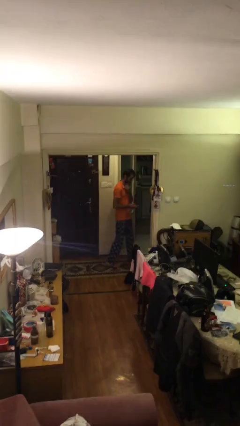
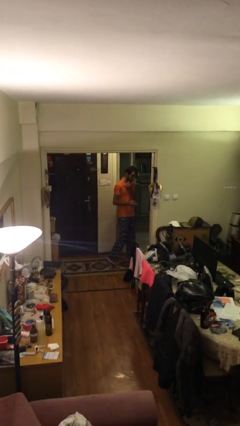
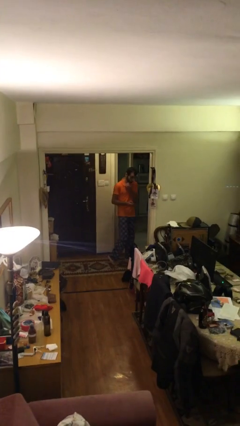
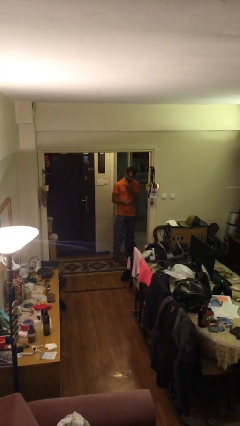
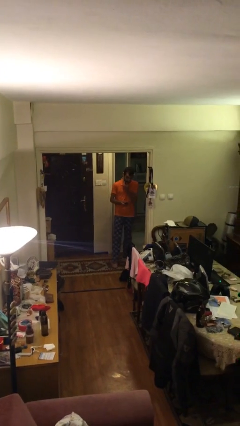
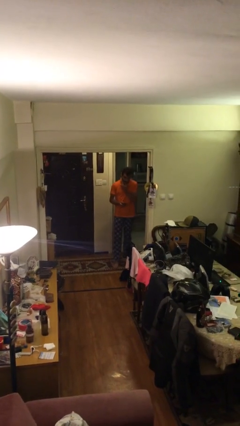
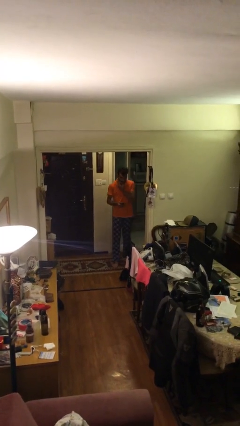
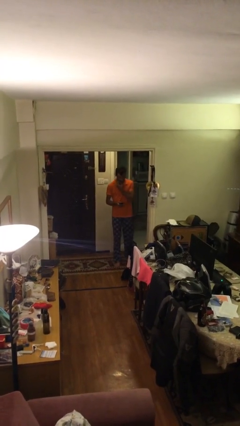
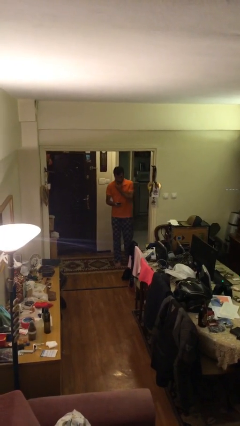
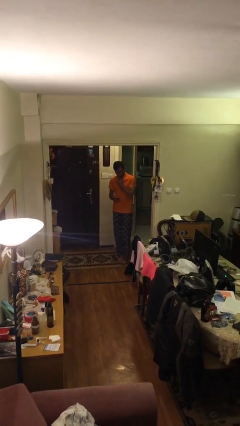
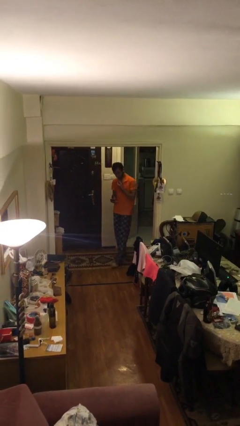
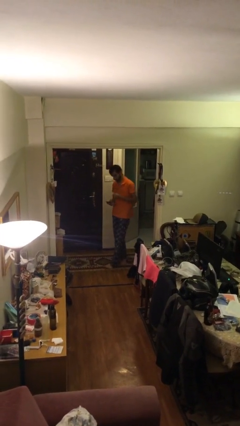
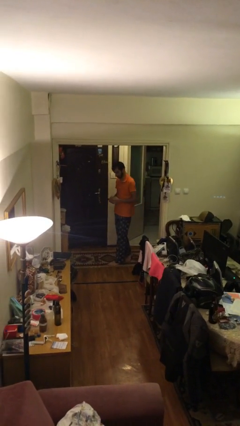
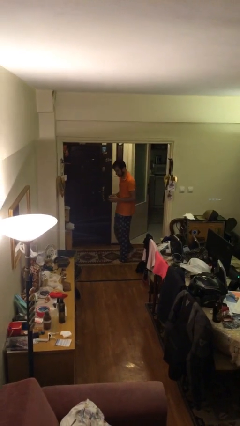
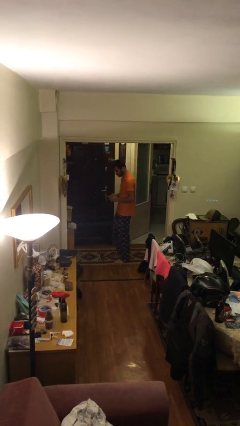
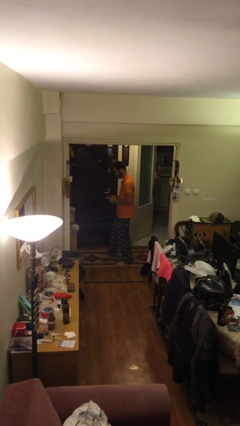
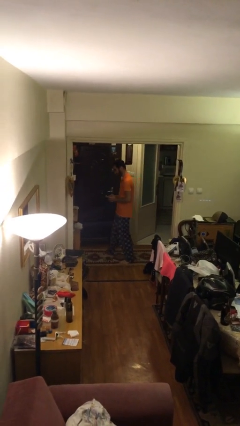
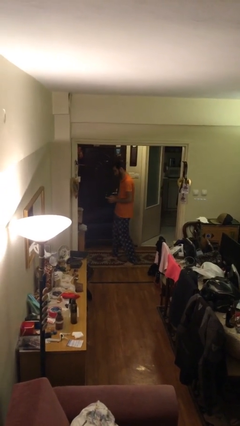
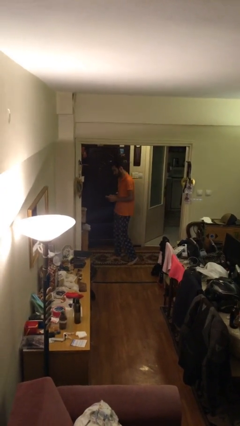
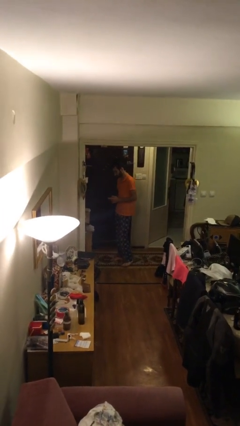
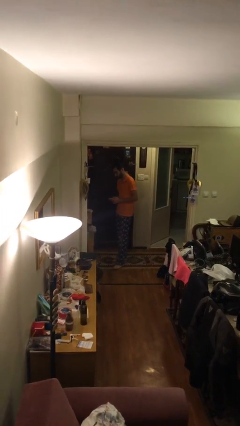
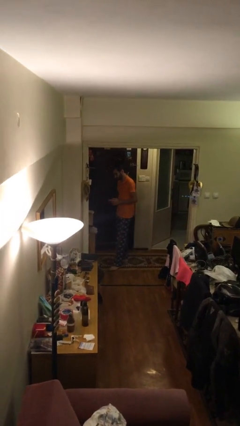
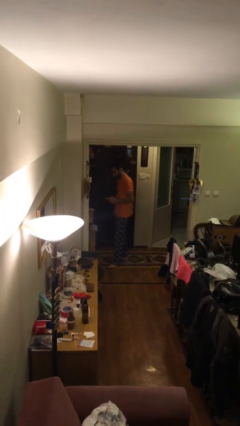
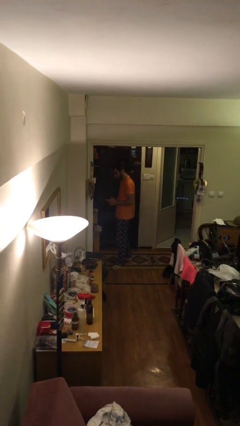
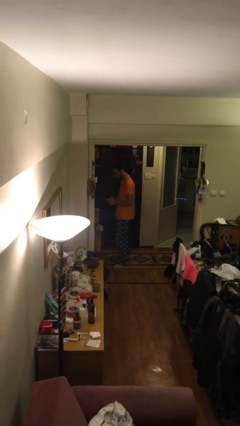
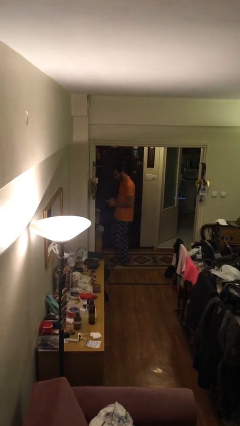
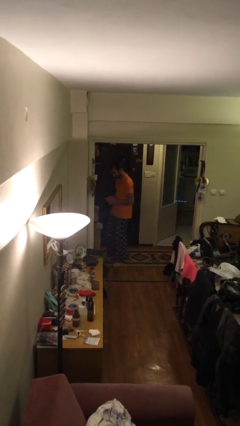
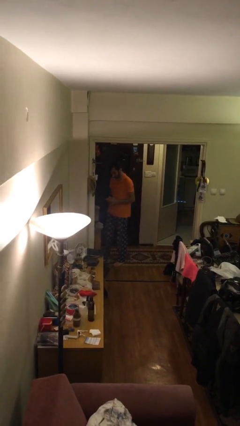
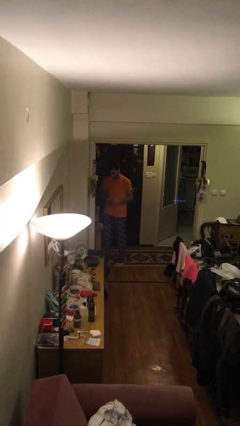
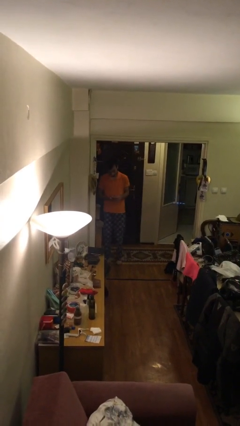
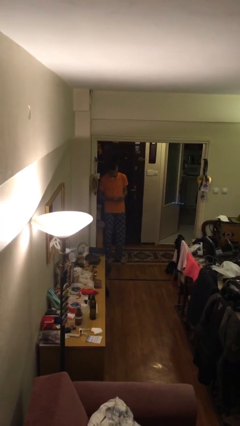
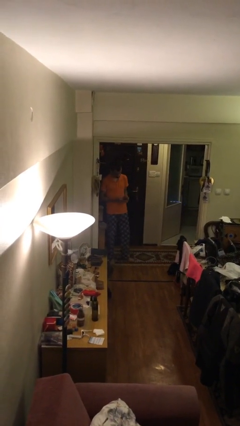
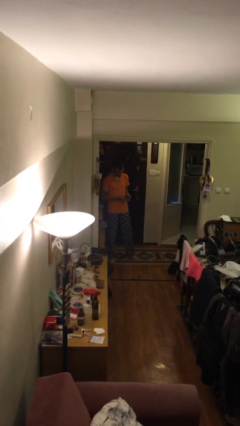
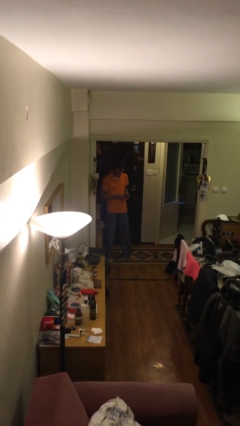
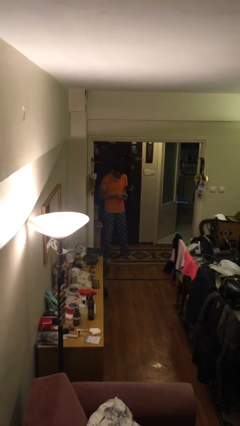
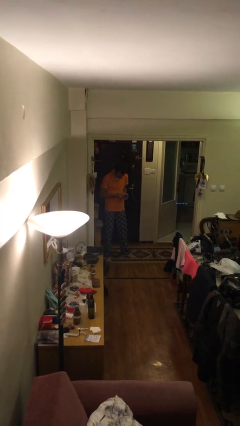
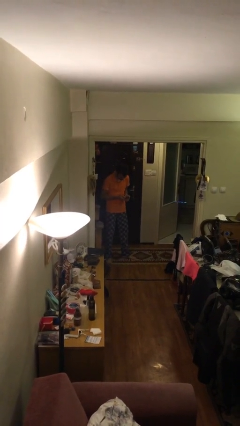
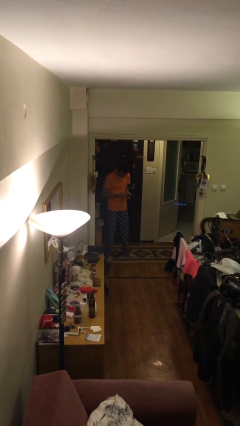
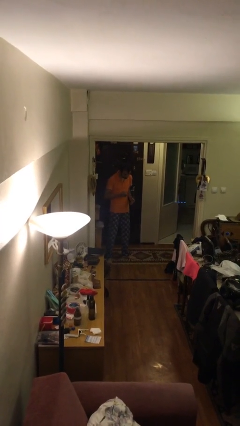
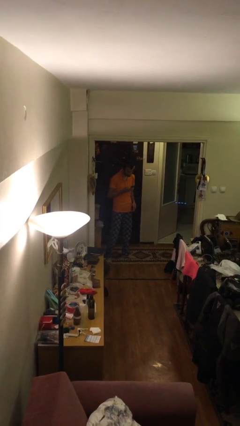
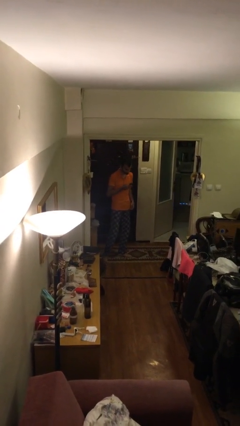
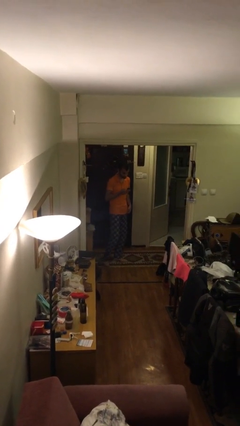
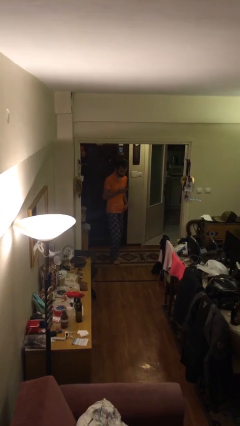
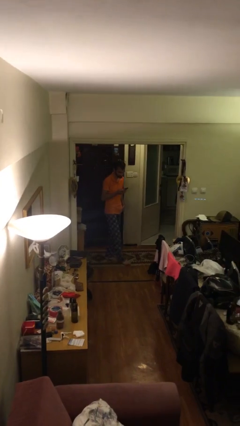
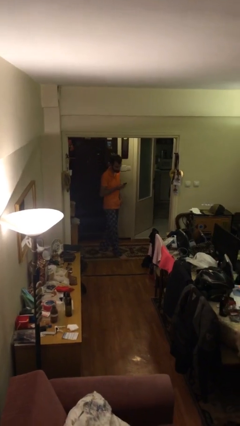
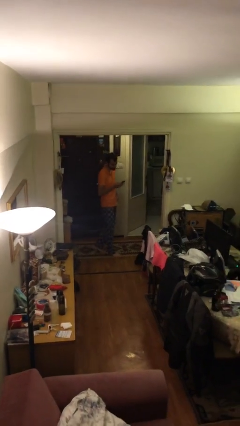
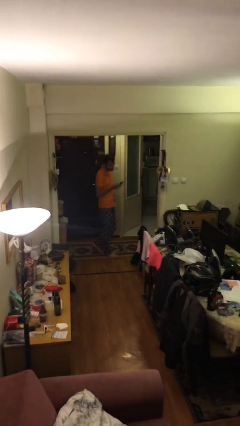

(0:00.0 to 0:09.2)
person texts on phone

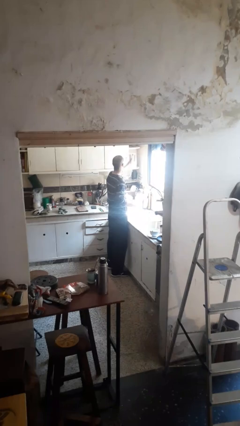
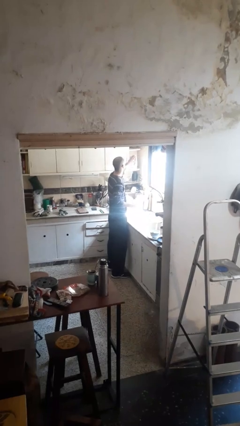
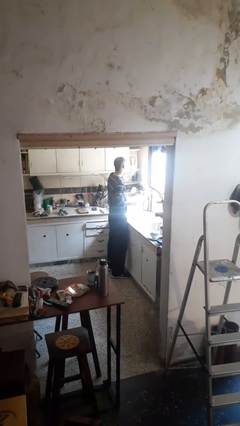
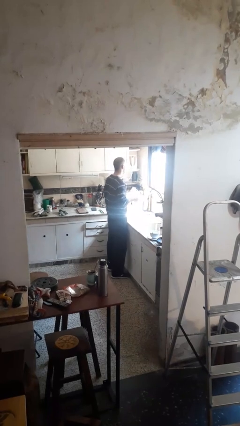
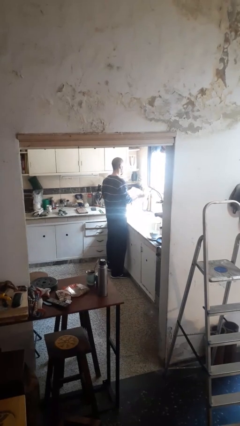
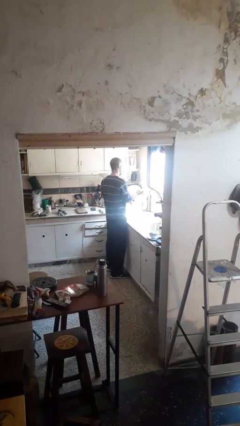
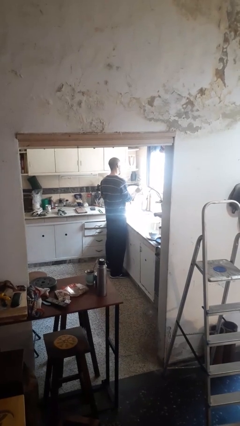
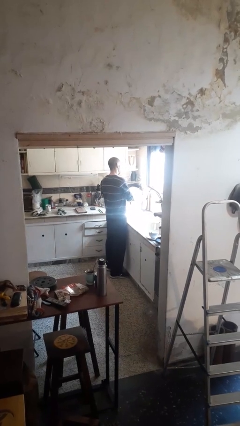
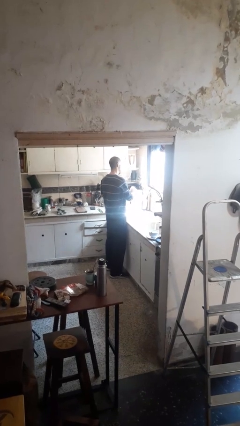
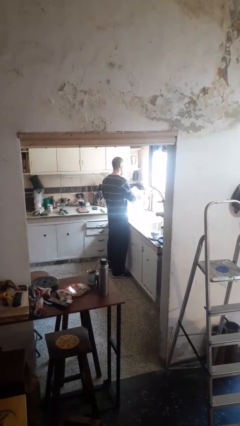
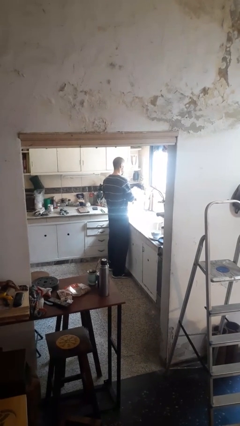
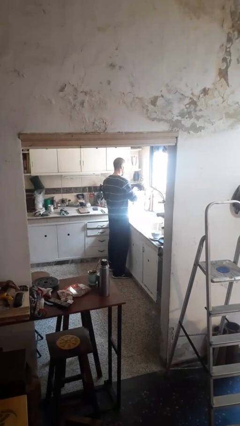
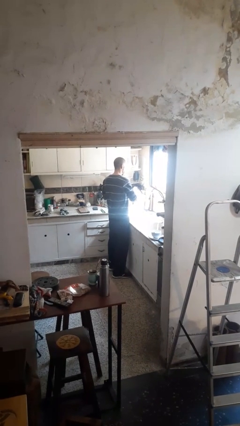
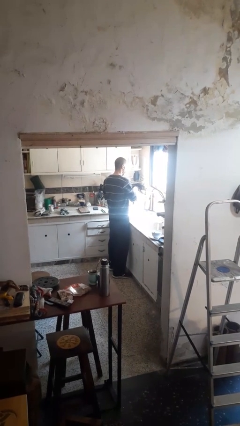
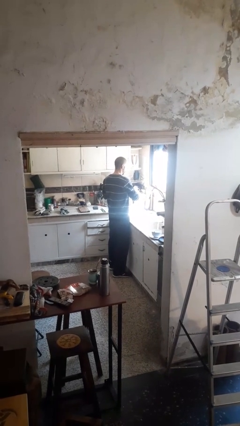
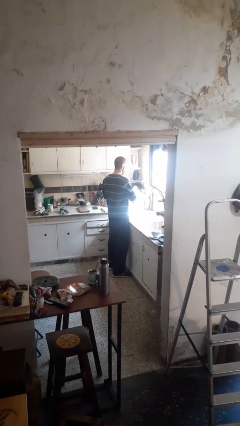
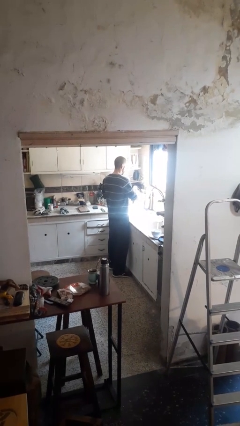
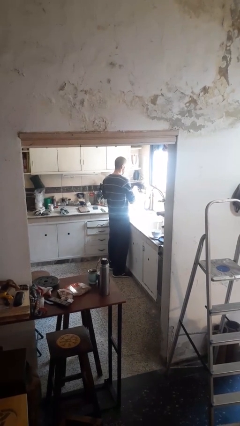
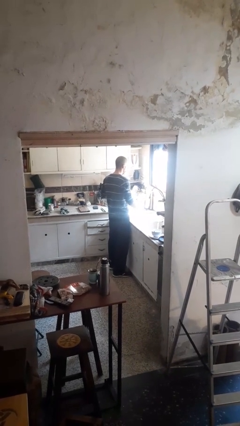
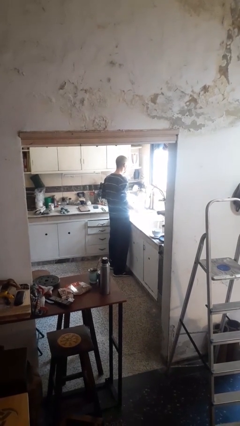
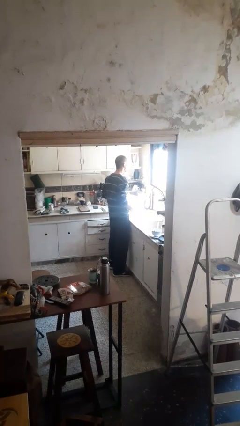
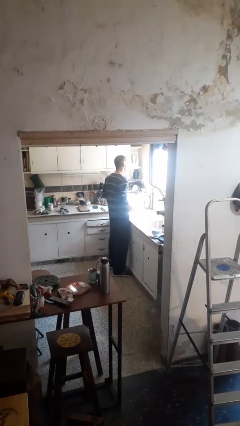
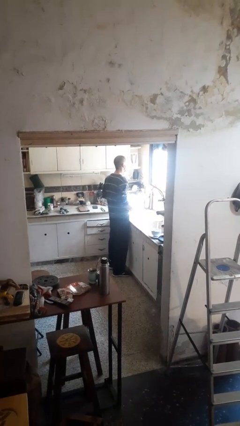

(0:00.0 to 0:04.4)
person washes dish

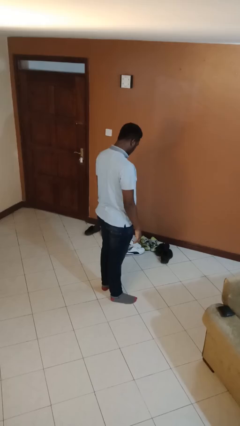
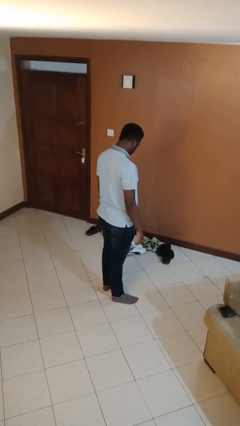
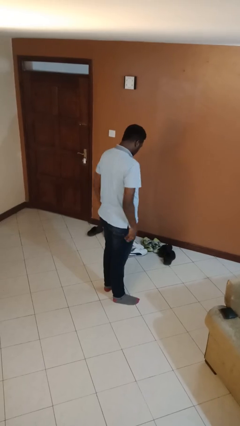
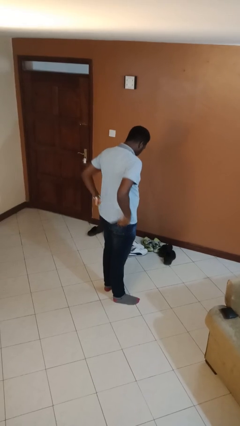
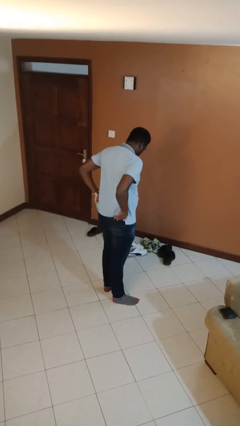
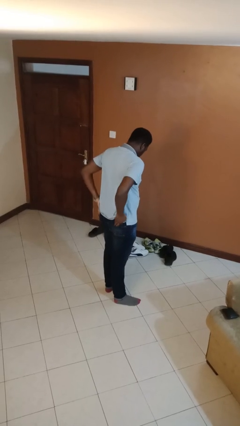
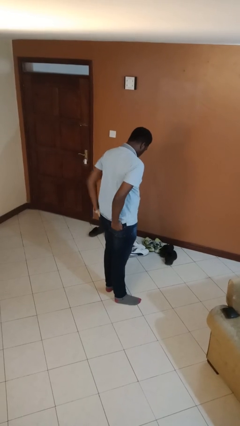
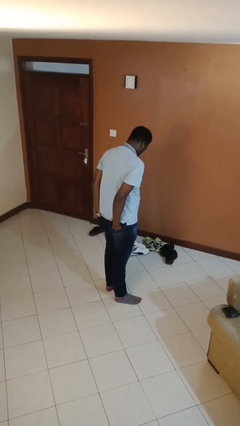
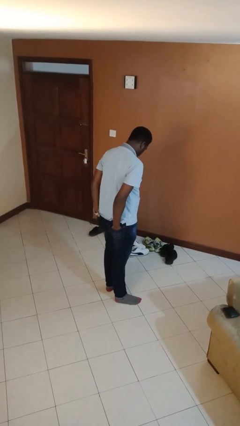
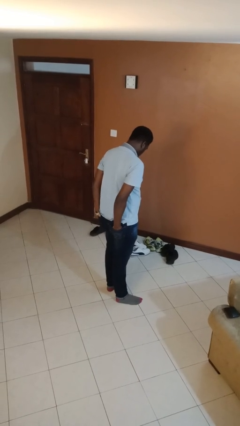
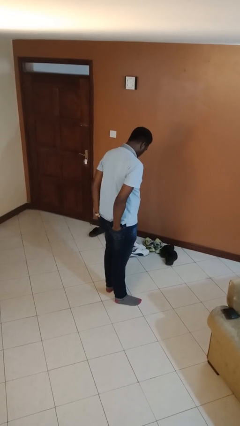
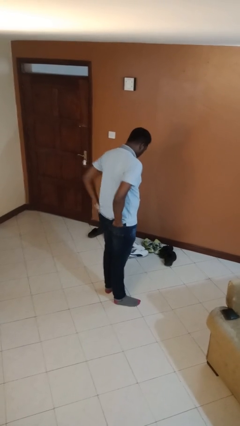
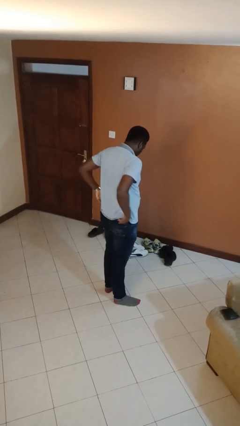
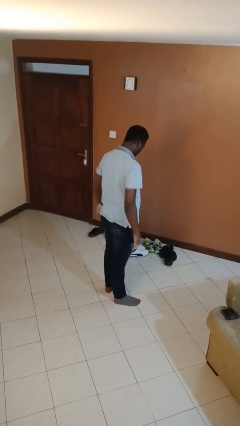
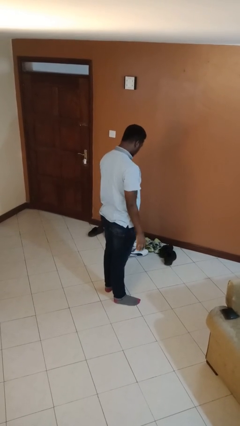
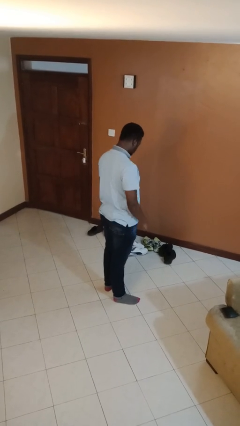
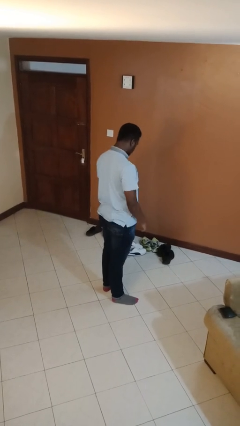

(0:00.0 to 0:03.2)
person puts hands in back pockets

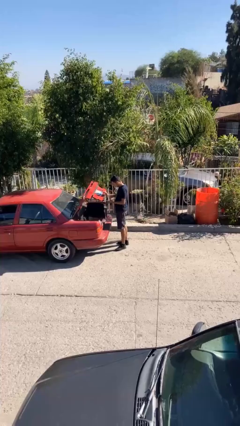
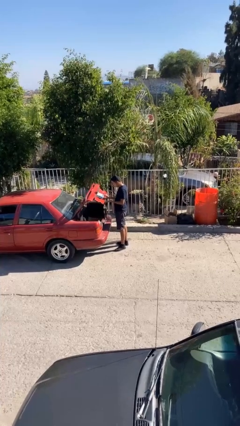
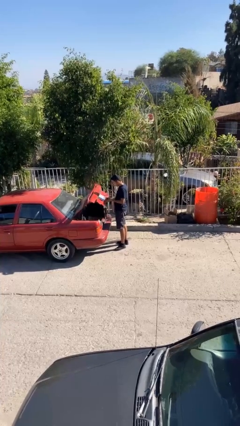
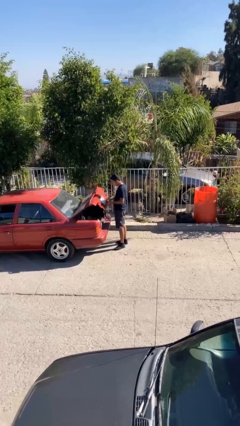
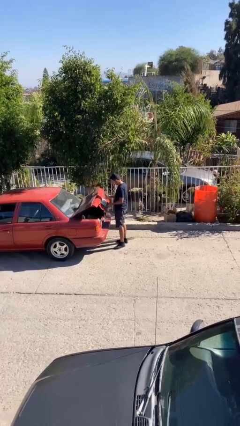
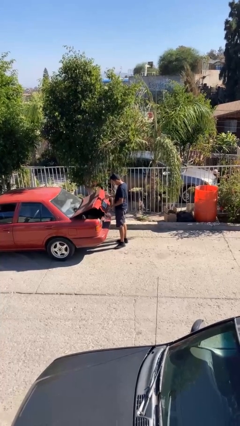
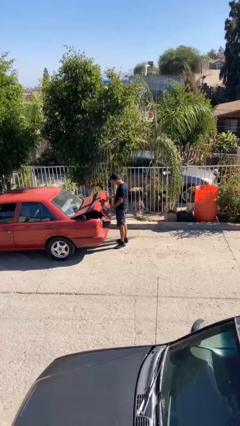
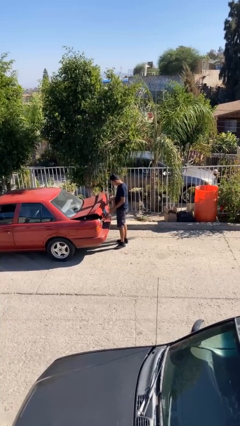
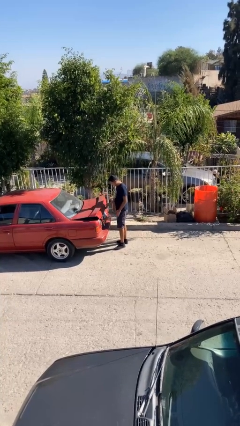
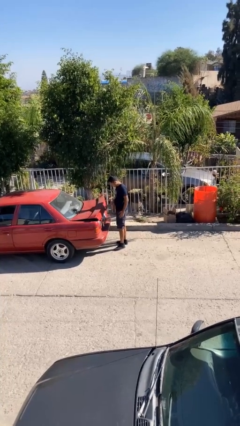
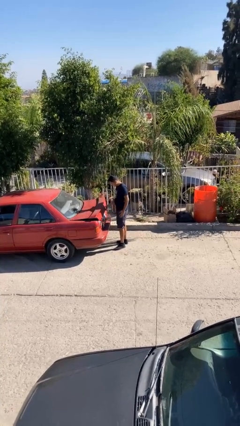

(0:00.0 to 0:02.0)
person closes car trunk
